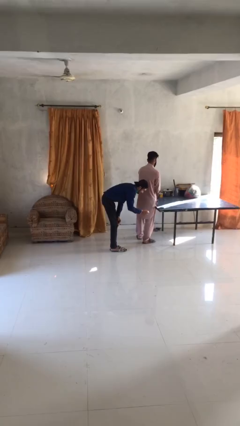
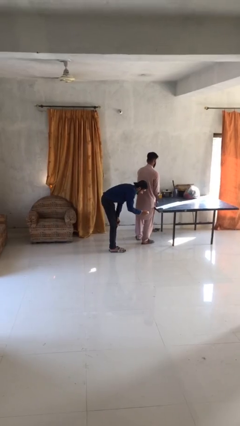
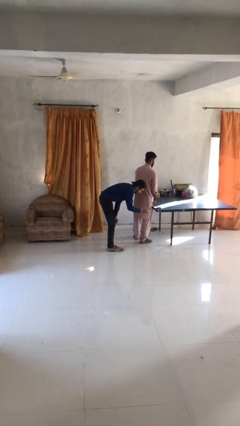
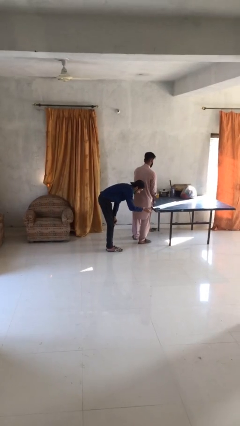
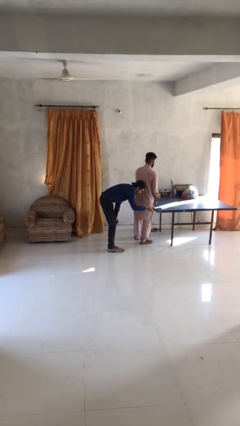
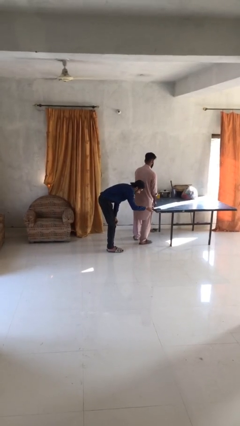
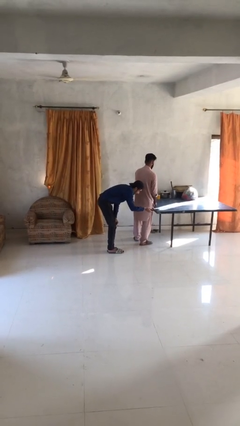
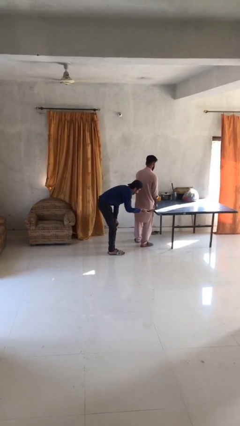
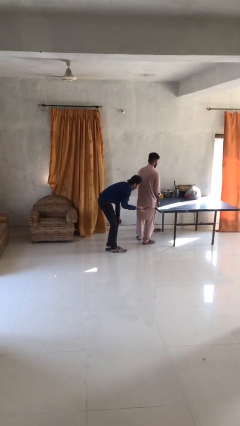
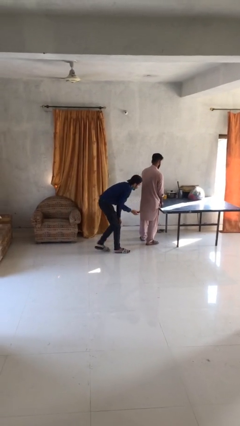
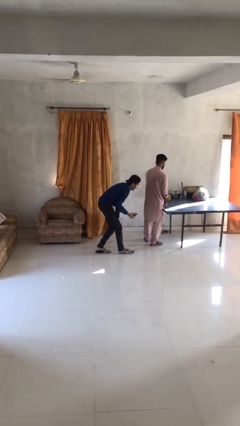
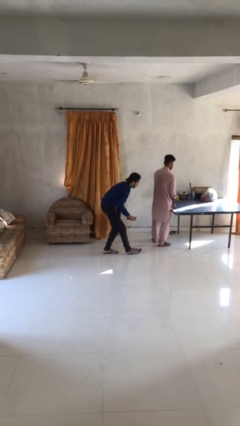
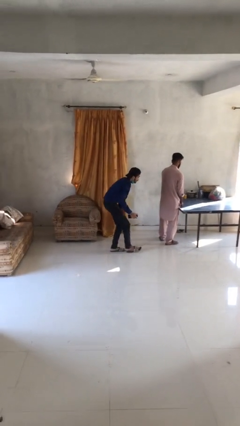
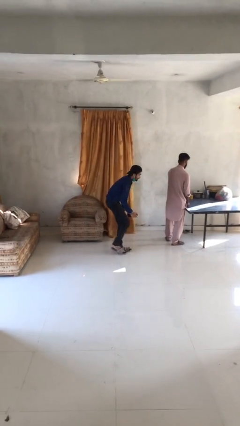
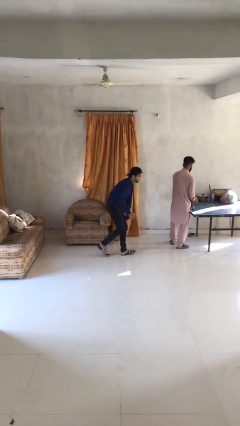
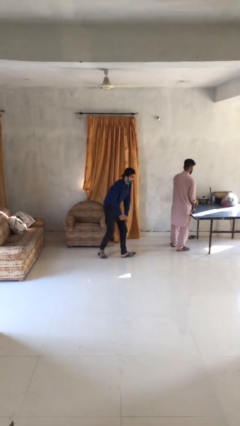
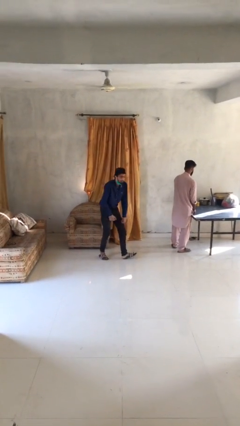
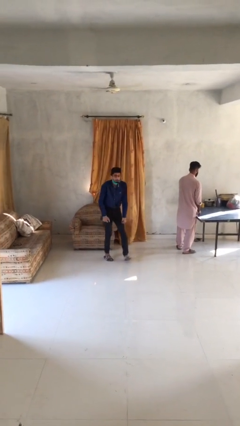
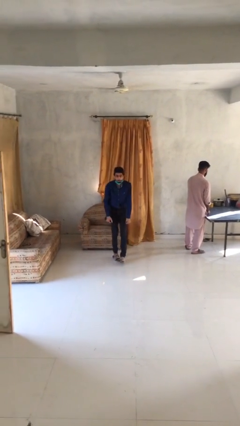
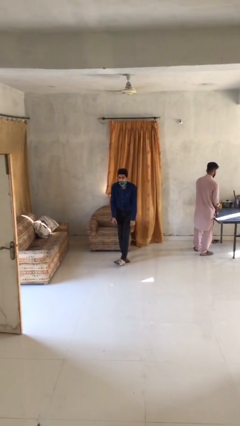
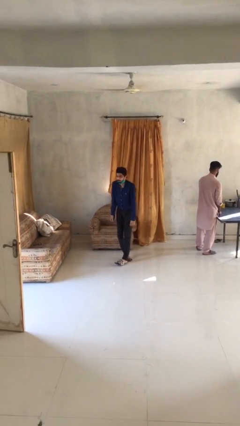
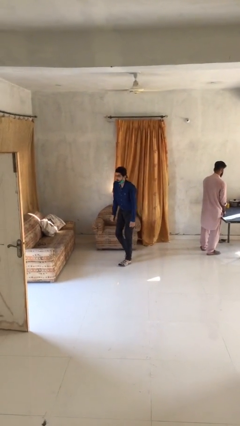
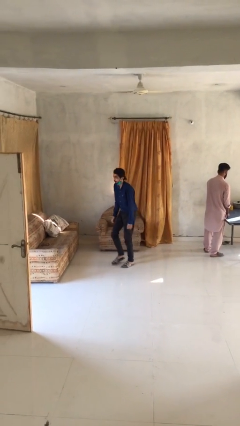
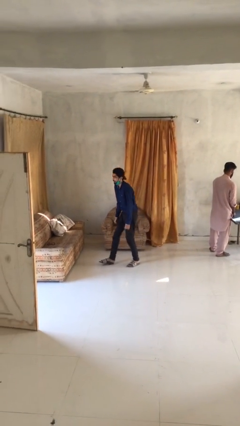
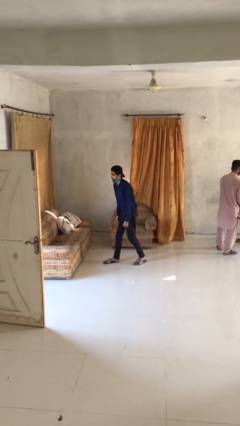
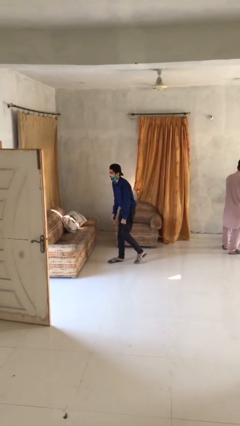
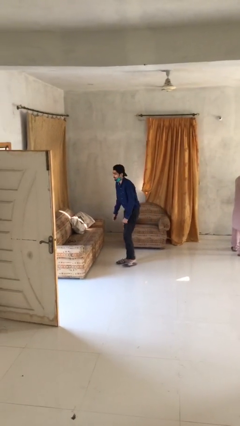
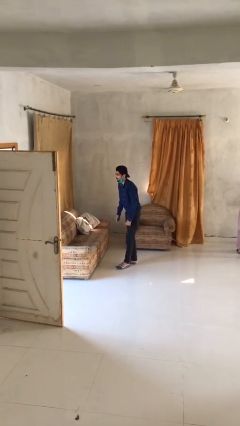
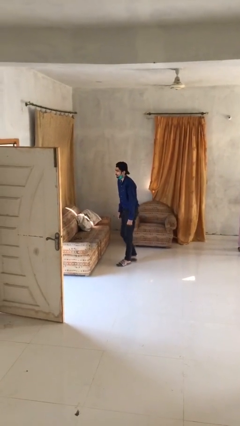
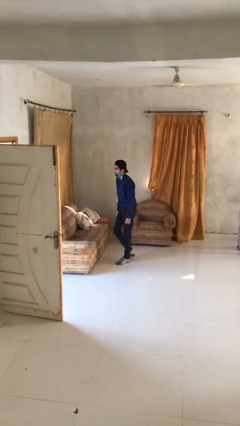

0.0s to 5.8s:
person steals object from person

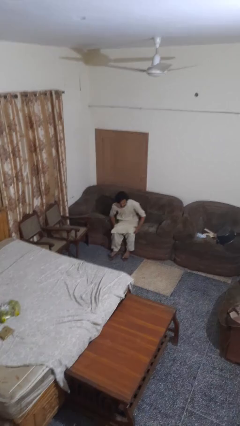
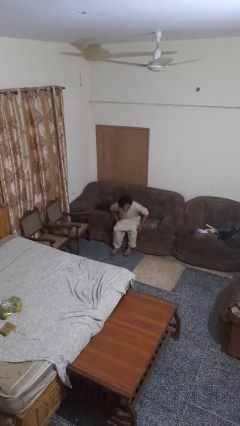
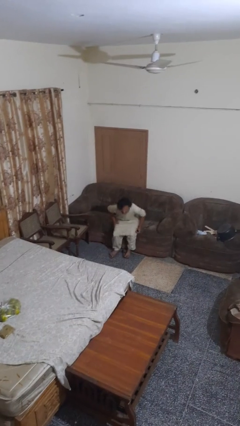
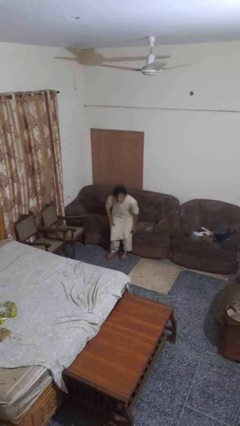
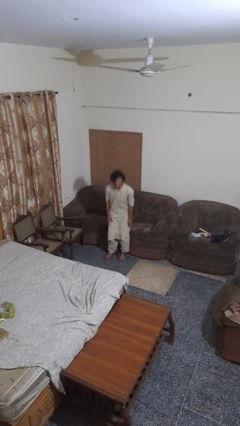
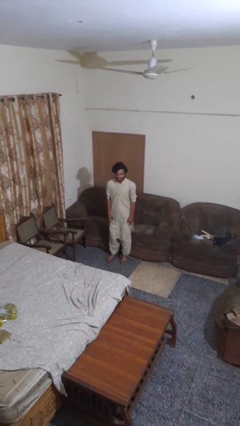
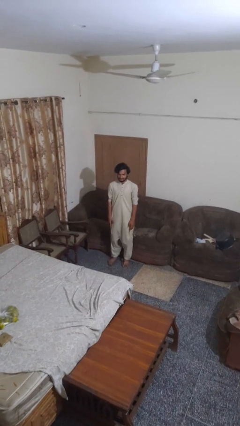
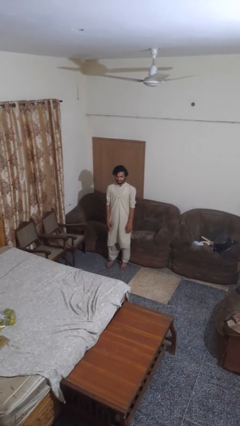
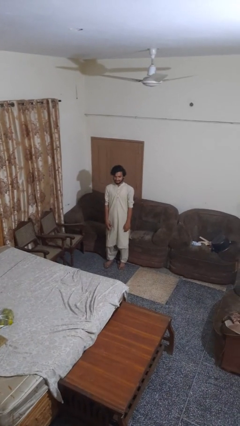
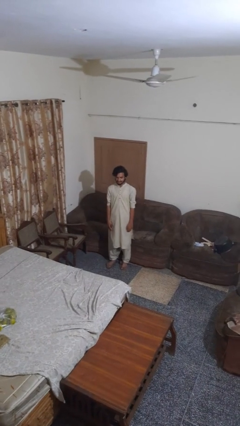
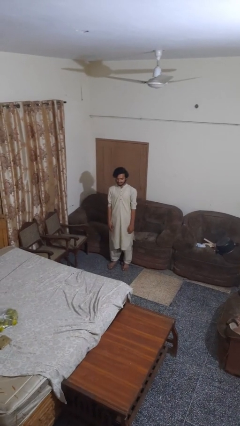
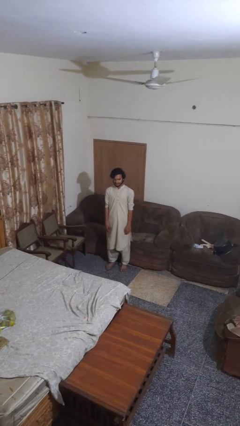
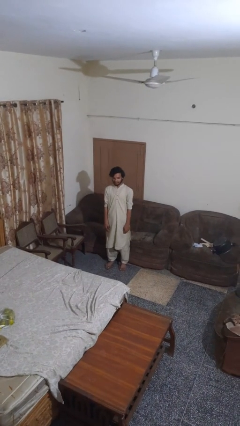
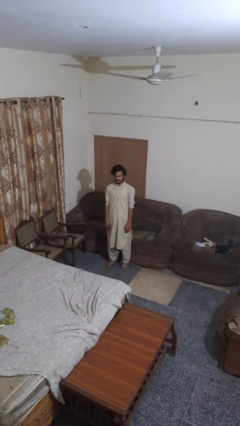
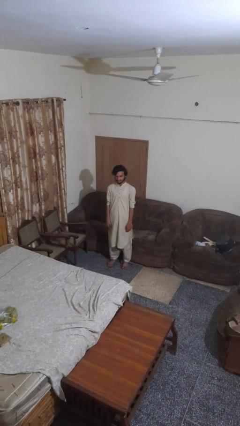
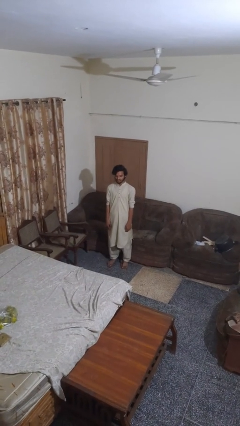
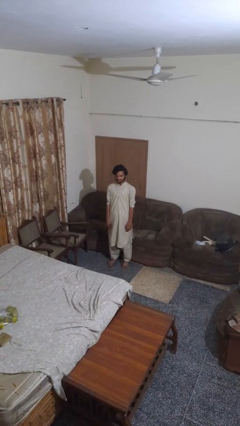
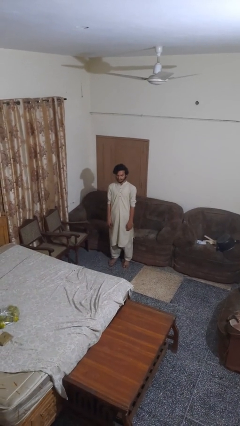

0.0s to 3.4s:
person stands up

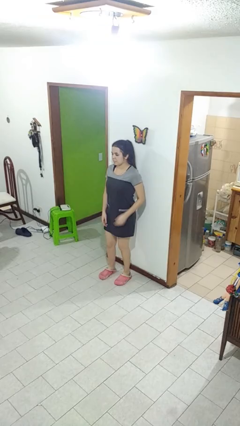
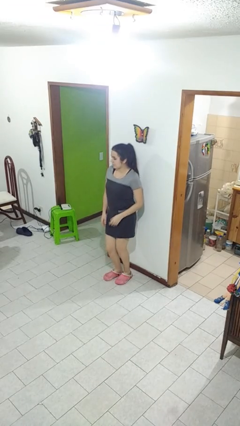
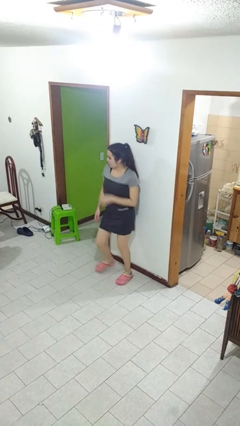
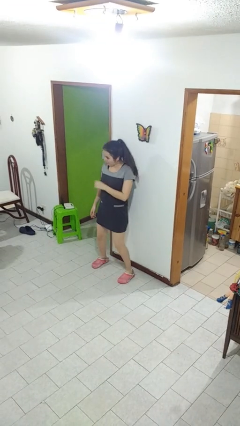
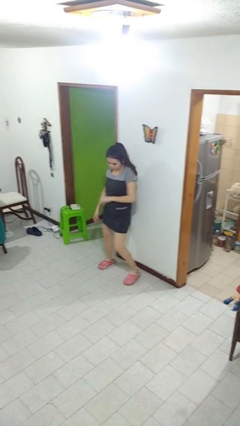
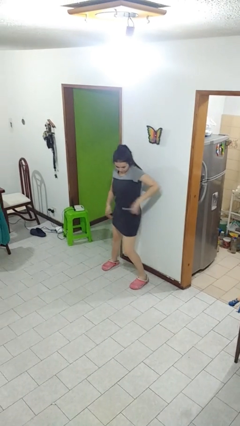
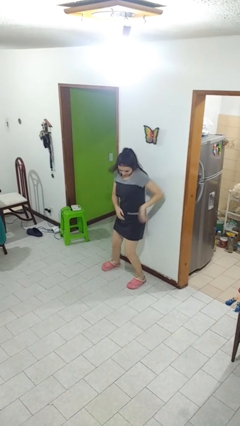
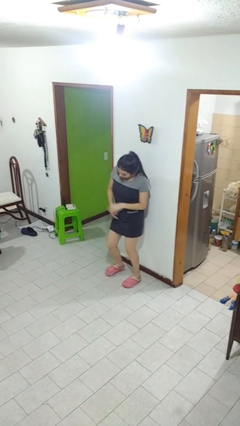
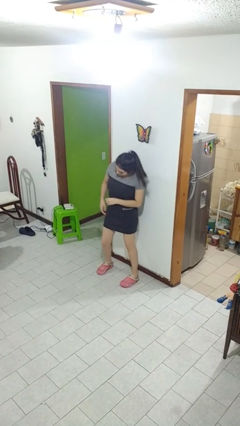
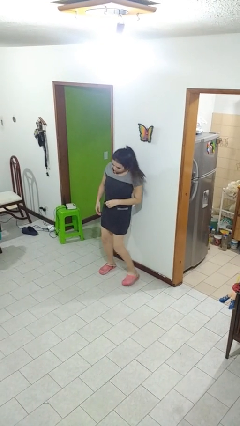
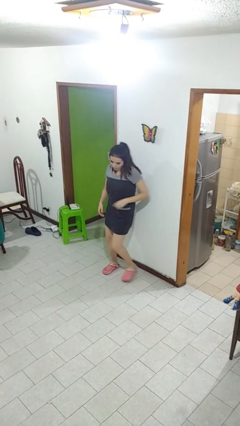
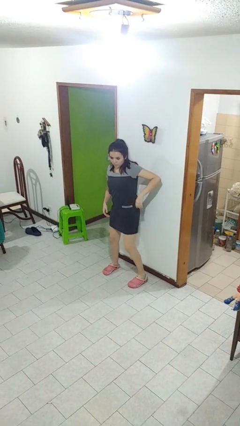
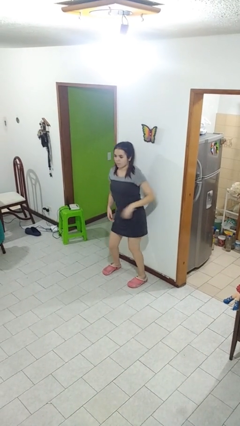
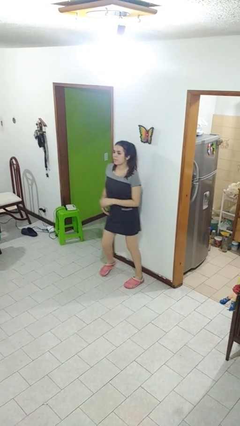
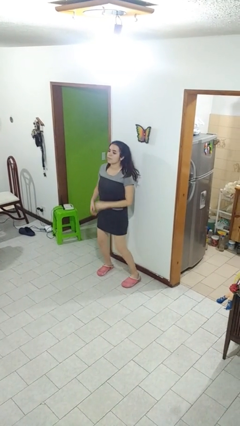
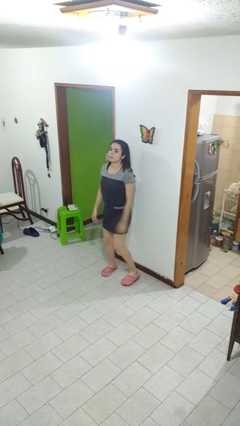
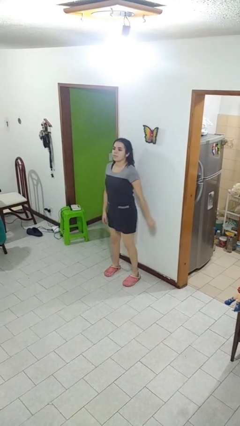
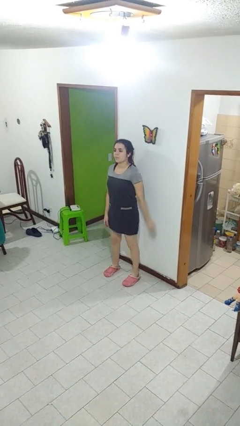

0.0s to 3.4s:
person dances in place

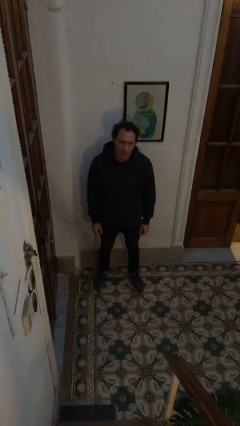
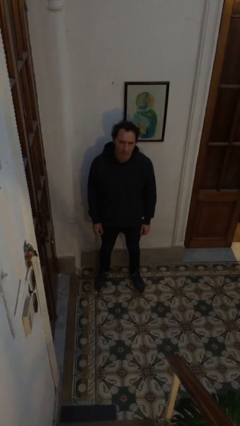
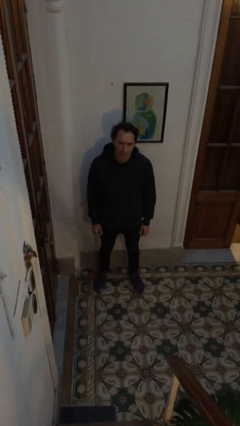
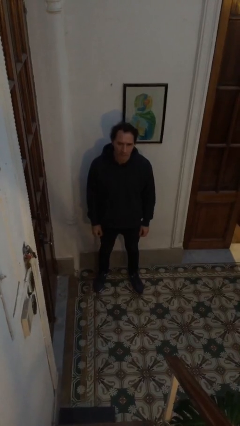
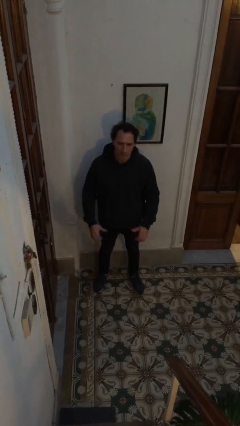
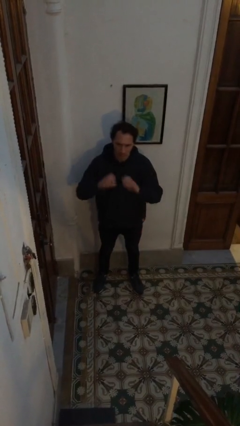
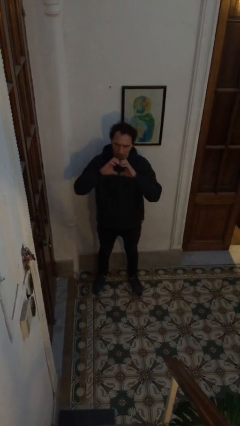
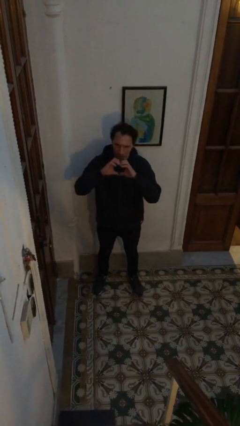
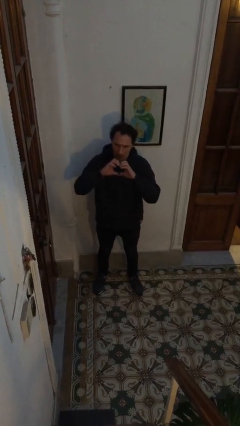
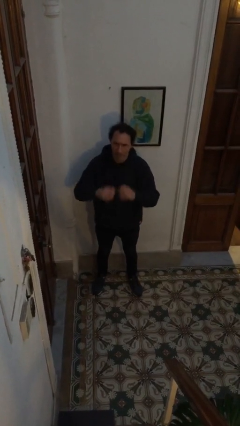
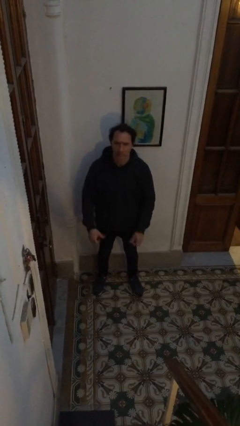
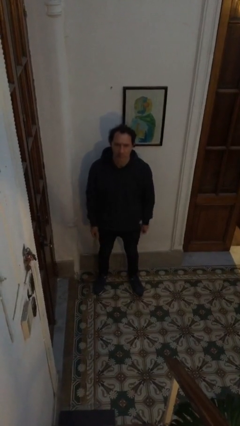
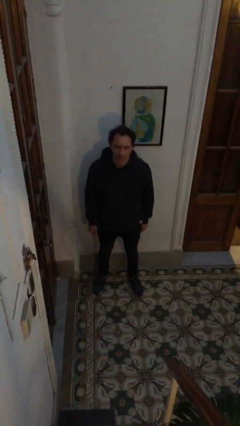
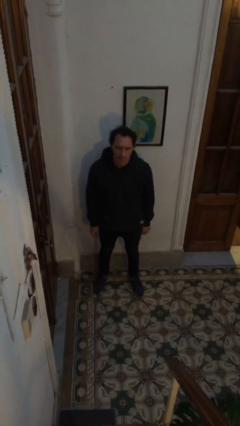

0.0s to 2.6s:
person gestures heart

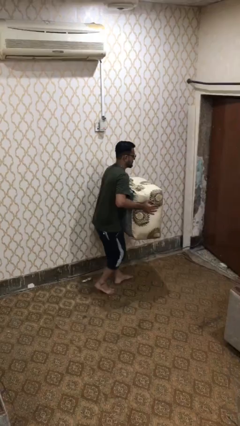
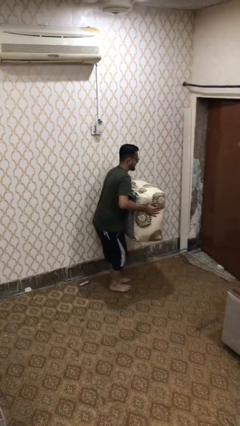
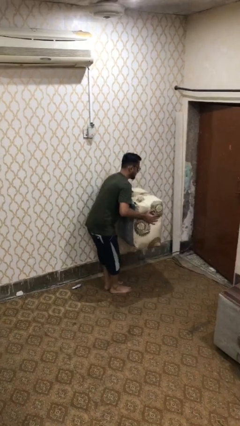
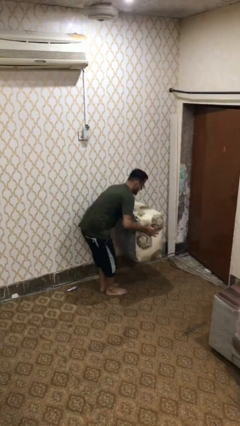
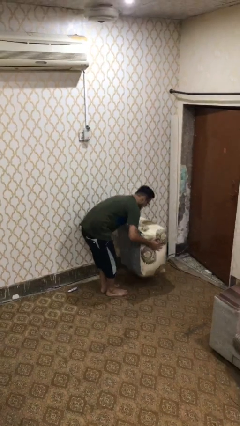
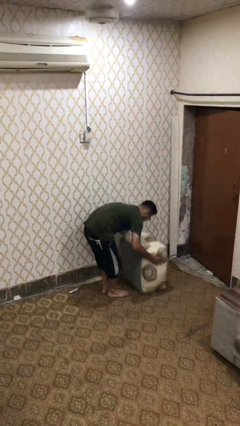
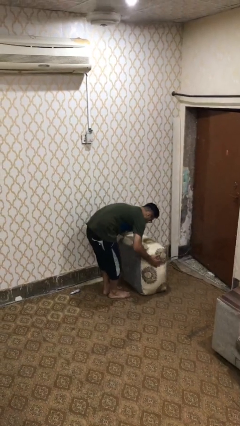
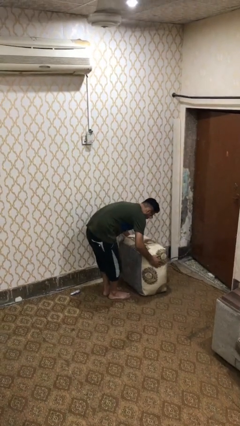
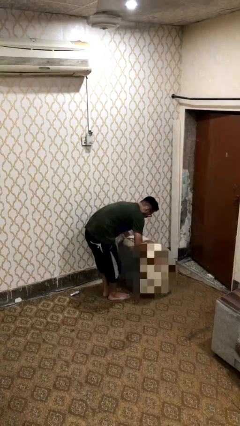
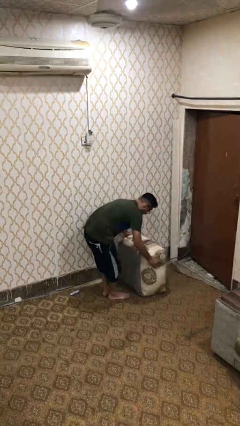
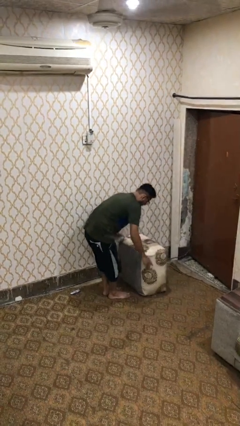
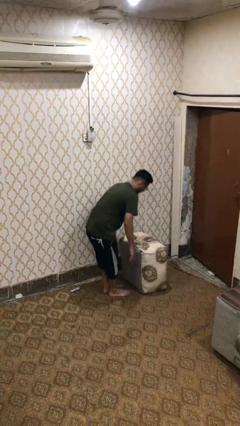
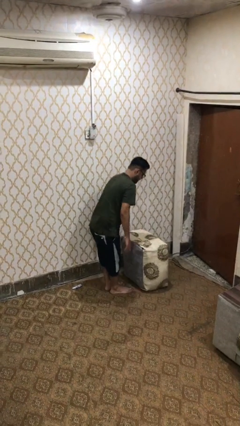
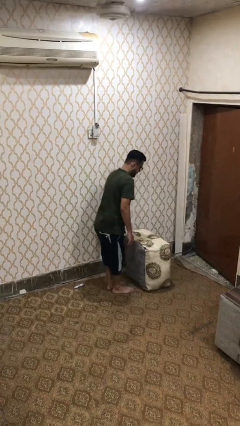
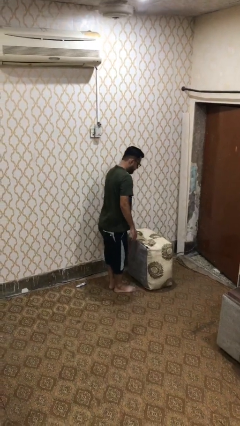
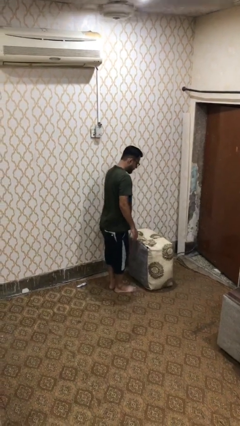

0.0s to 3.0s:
person puts down object on floor
